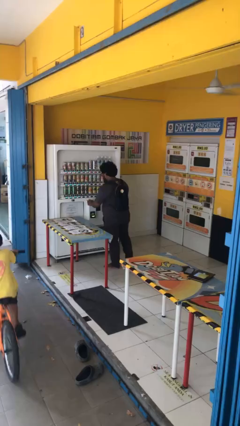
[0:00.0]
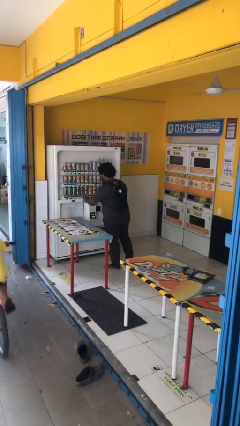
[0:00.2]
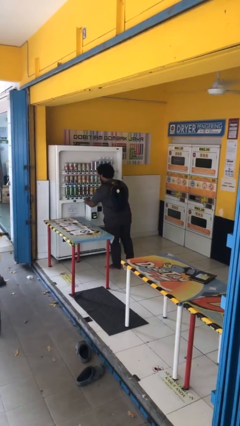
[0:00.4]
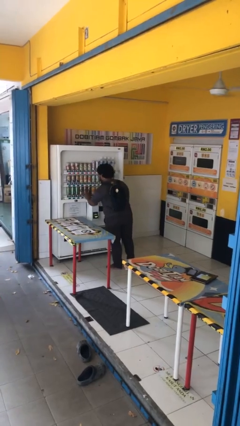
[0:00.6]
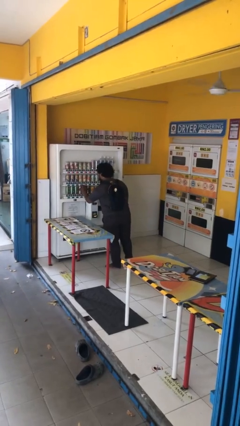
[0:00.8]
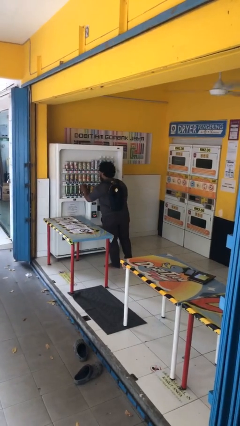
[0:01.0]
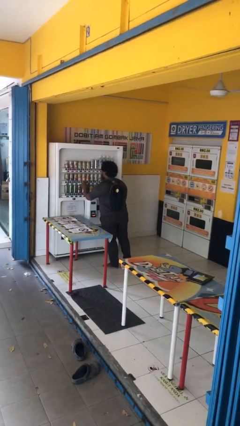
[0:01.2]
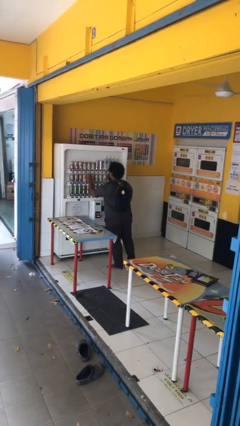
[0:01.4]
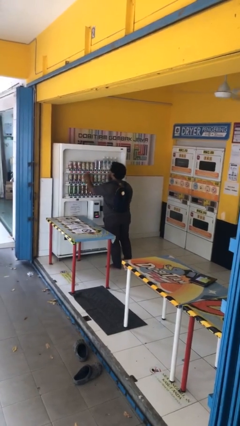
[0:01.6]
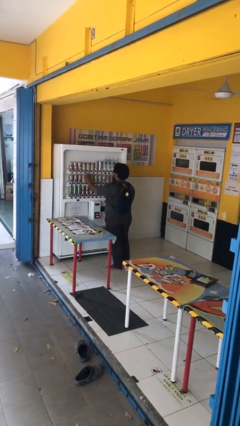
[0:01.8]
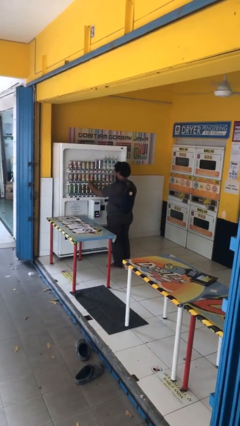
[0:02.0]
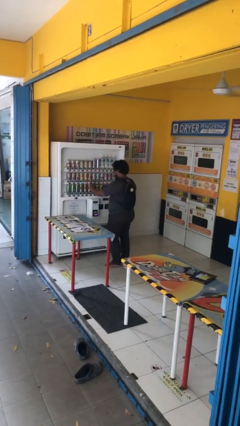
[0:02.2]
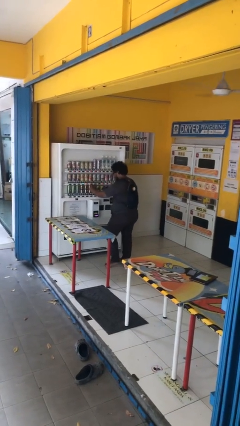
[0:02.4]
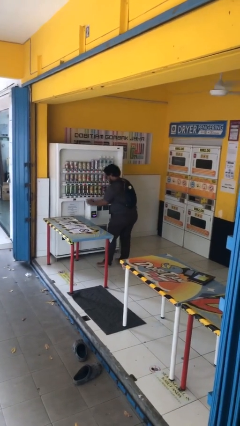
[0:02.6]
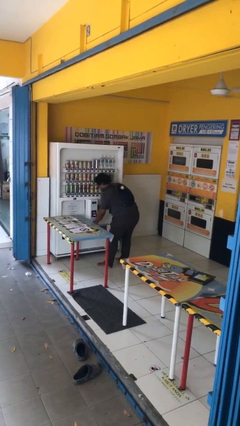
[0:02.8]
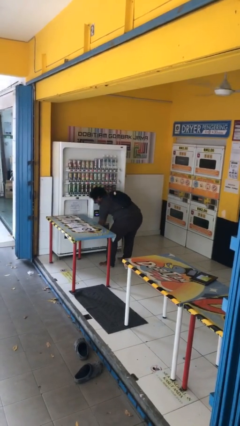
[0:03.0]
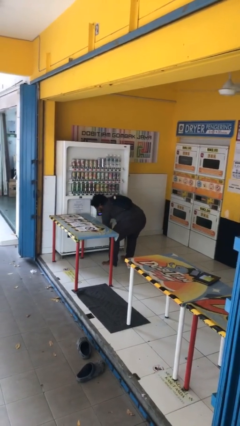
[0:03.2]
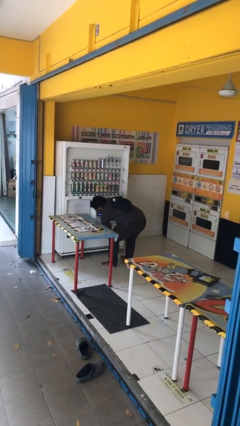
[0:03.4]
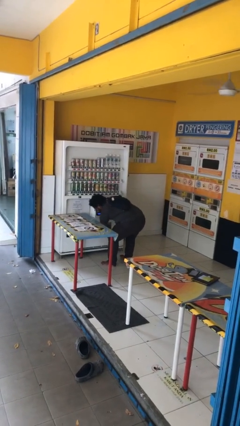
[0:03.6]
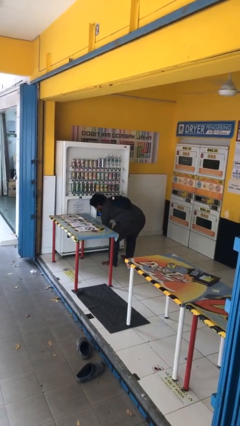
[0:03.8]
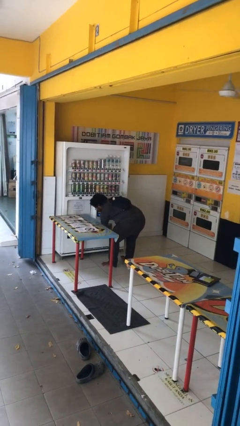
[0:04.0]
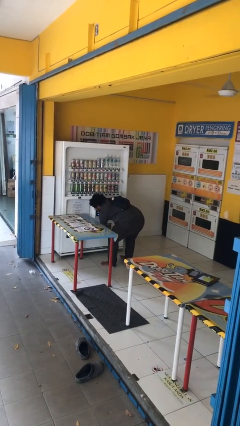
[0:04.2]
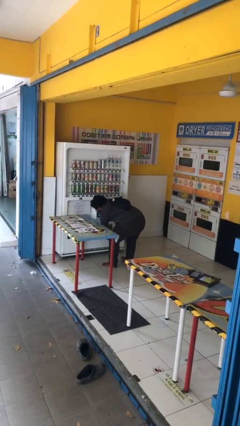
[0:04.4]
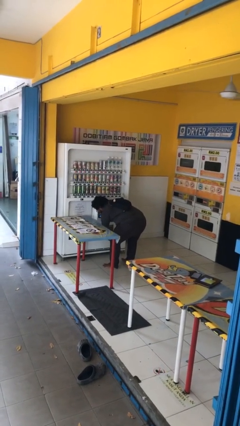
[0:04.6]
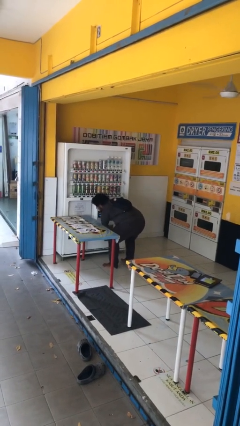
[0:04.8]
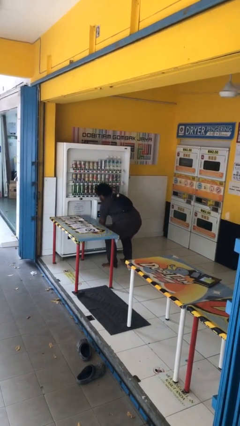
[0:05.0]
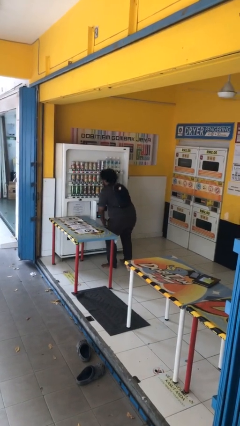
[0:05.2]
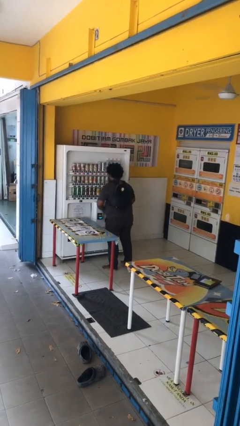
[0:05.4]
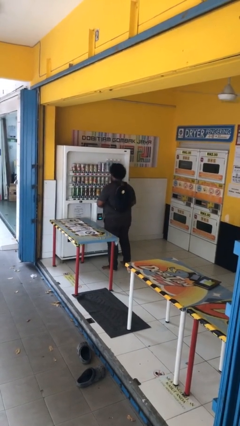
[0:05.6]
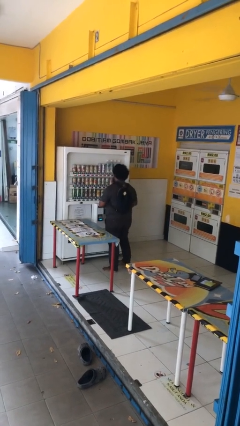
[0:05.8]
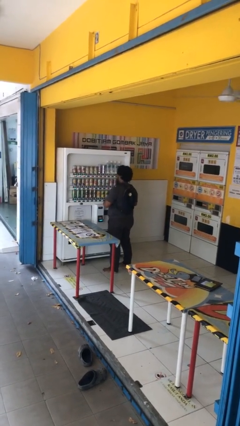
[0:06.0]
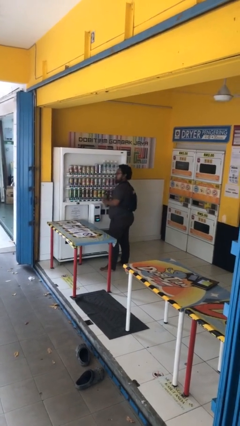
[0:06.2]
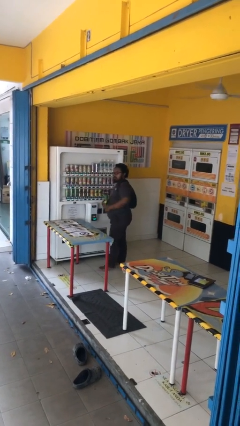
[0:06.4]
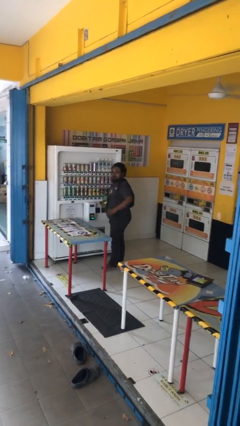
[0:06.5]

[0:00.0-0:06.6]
person purchases from machine

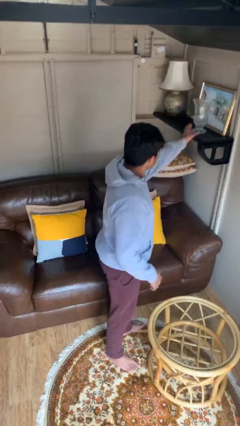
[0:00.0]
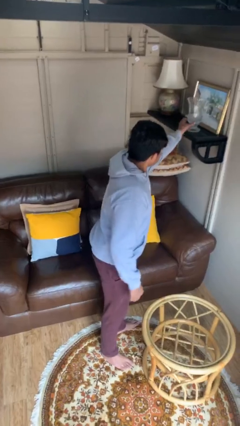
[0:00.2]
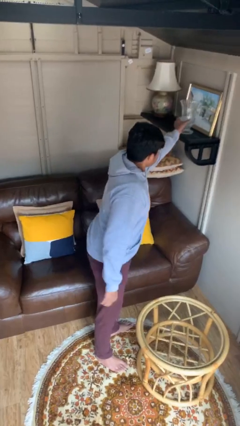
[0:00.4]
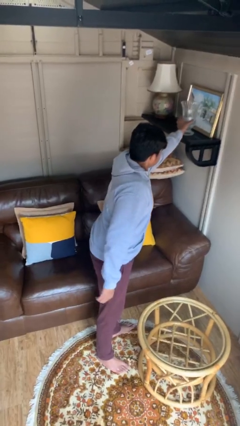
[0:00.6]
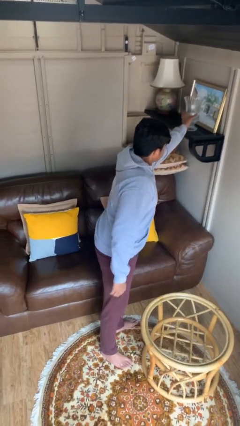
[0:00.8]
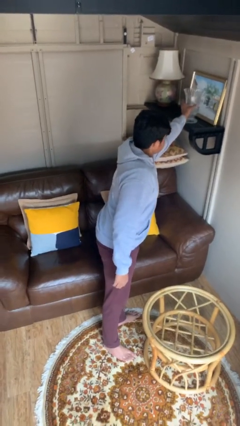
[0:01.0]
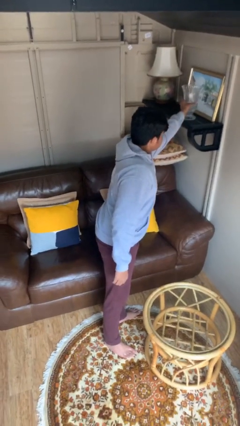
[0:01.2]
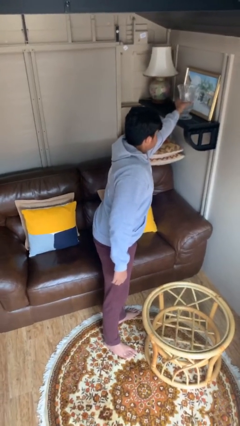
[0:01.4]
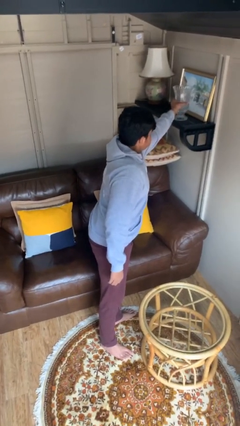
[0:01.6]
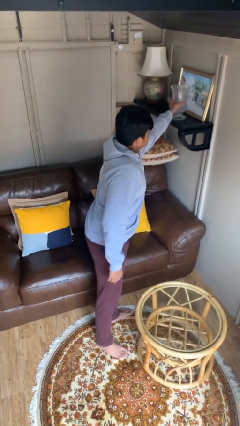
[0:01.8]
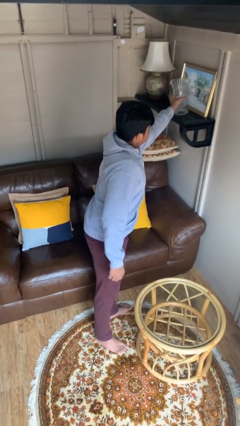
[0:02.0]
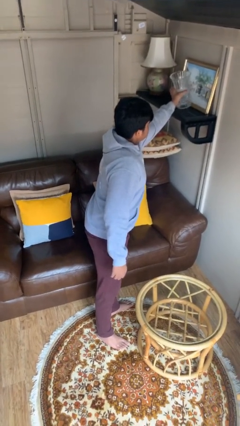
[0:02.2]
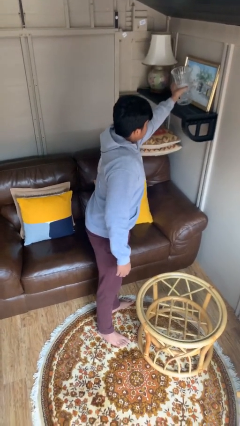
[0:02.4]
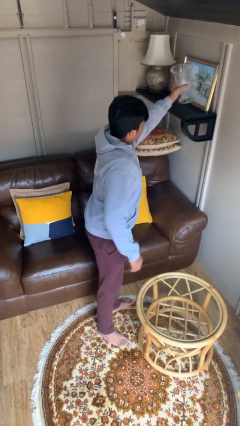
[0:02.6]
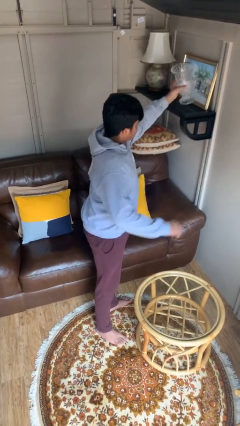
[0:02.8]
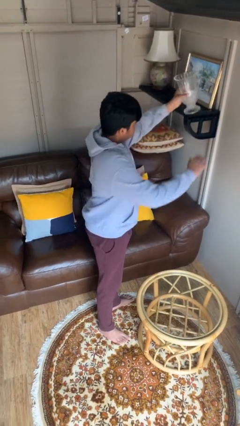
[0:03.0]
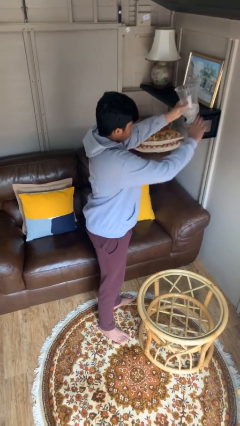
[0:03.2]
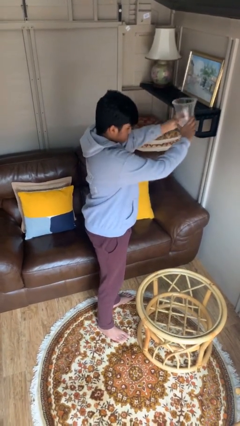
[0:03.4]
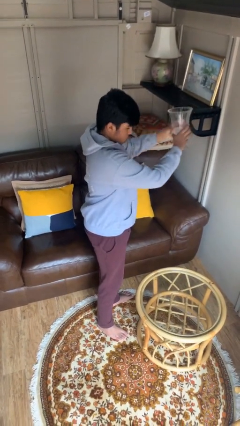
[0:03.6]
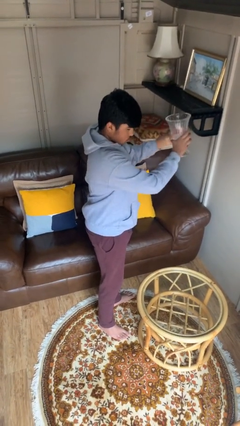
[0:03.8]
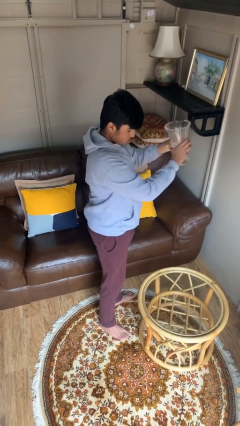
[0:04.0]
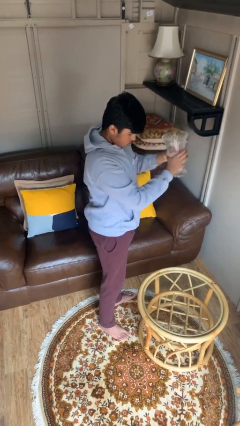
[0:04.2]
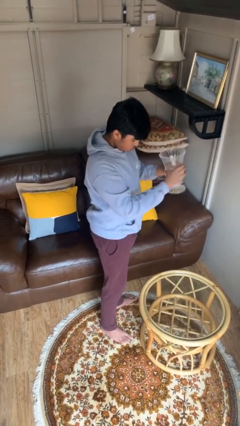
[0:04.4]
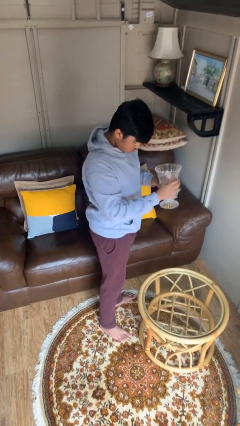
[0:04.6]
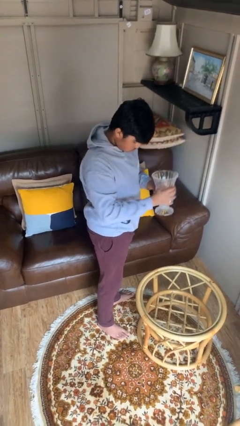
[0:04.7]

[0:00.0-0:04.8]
person picks up object from shelf

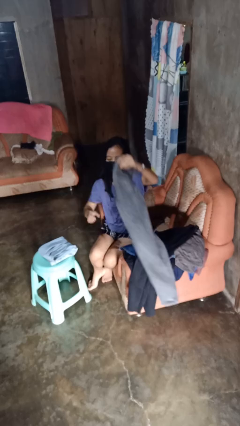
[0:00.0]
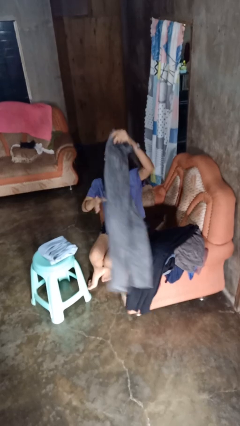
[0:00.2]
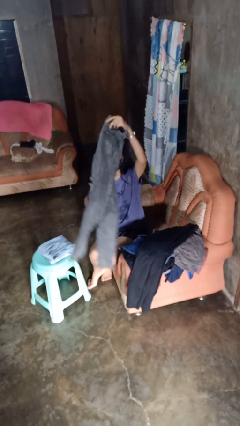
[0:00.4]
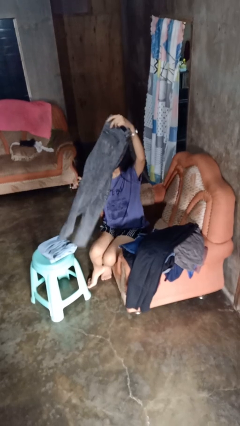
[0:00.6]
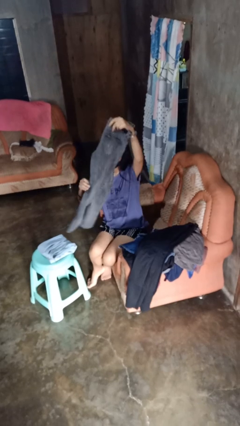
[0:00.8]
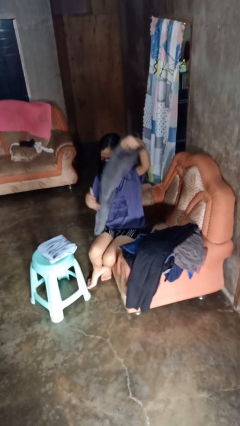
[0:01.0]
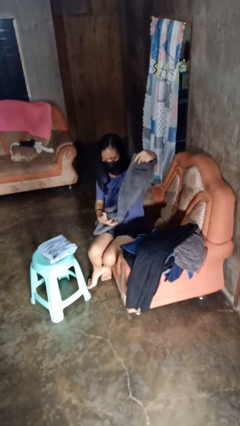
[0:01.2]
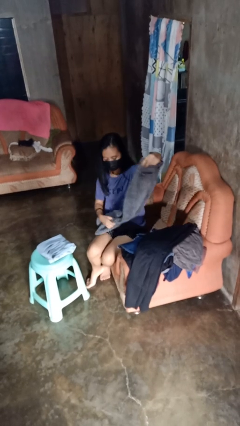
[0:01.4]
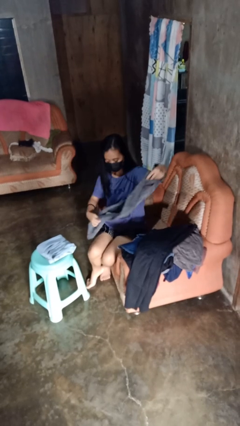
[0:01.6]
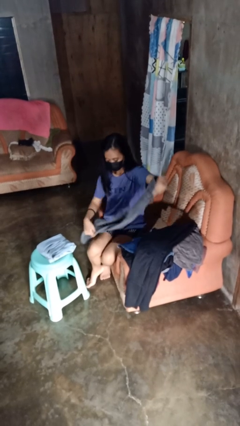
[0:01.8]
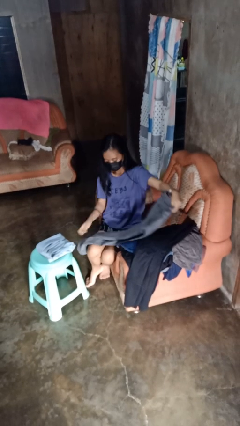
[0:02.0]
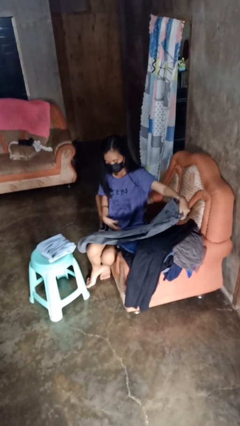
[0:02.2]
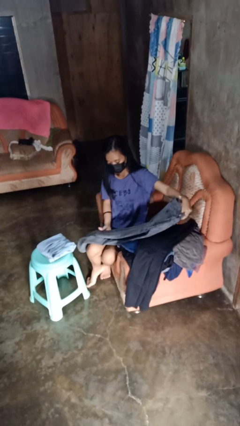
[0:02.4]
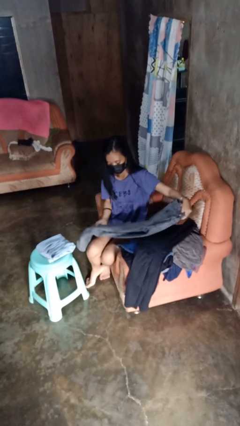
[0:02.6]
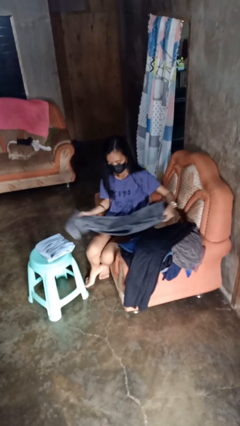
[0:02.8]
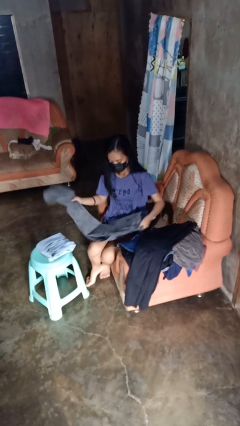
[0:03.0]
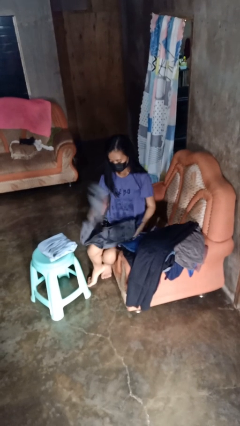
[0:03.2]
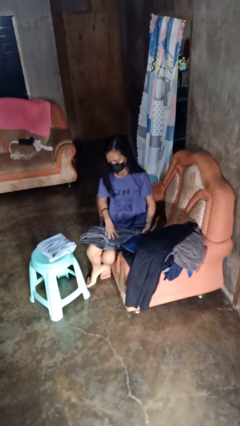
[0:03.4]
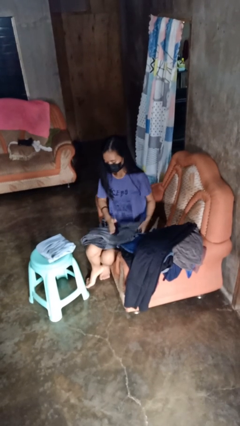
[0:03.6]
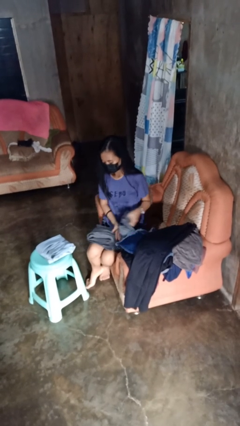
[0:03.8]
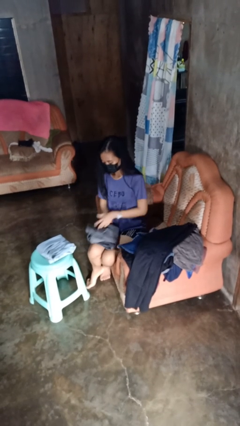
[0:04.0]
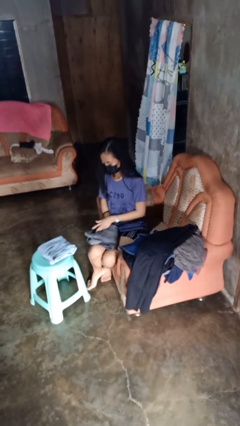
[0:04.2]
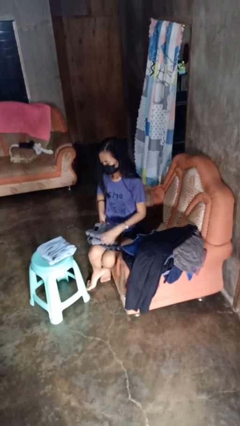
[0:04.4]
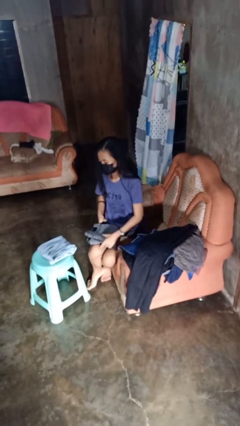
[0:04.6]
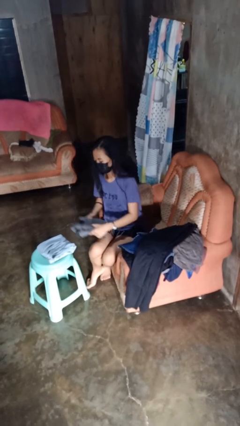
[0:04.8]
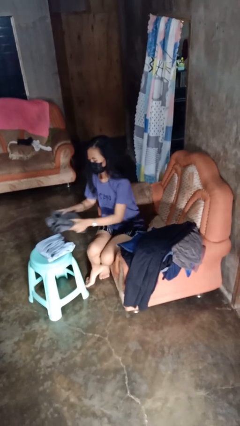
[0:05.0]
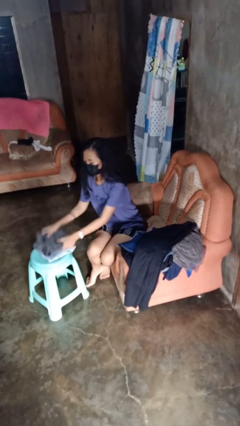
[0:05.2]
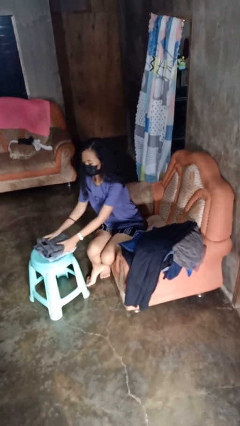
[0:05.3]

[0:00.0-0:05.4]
person folds pants

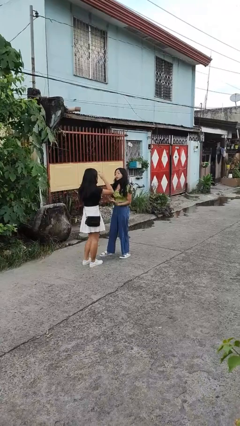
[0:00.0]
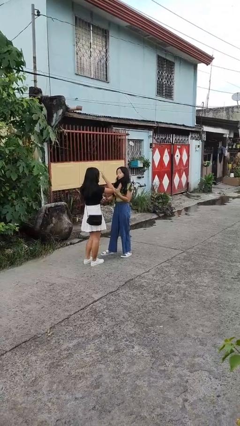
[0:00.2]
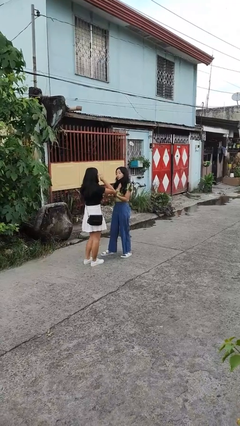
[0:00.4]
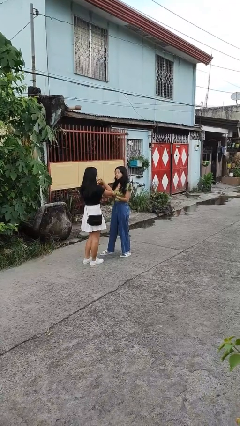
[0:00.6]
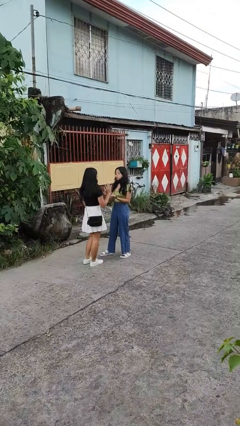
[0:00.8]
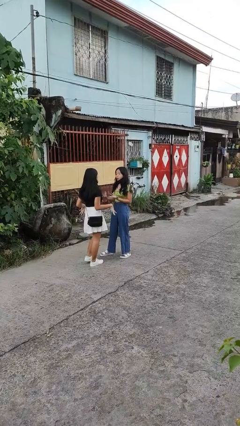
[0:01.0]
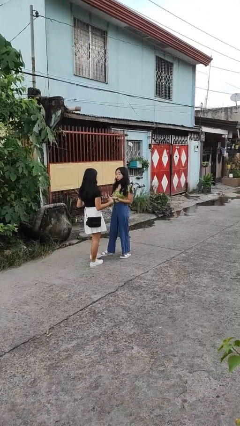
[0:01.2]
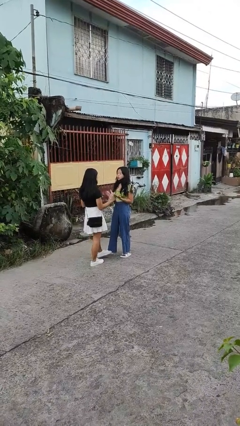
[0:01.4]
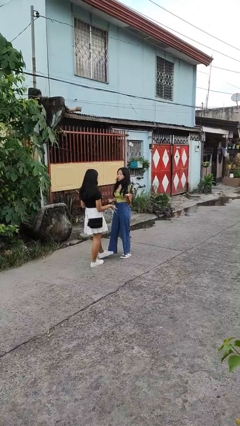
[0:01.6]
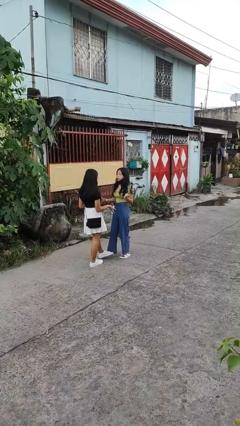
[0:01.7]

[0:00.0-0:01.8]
person talks to person
